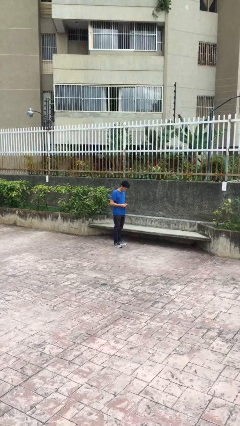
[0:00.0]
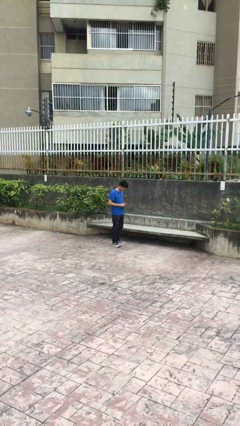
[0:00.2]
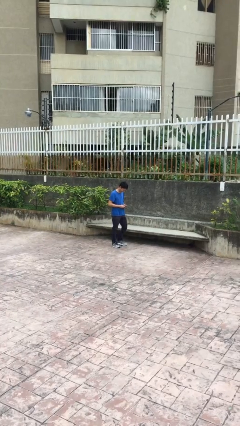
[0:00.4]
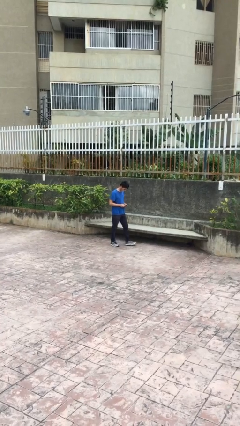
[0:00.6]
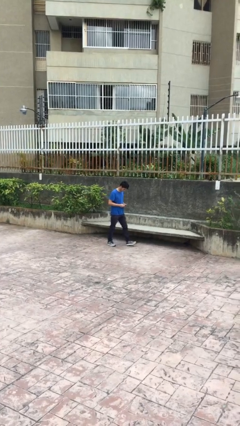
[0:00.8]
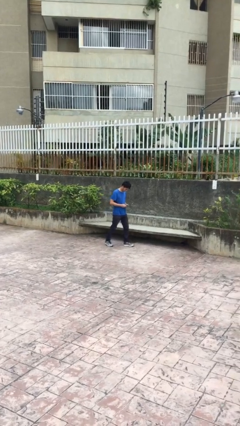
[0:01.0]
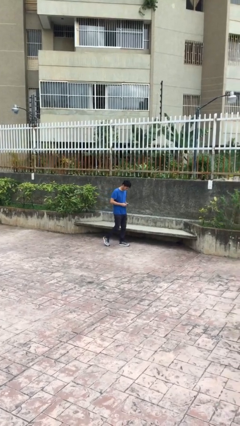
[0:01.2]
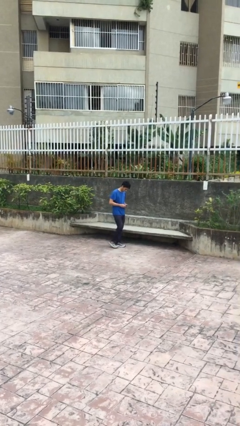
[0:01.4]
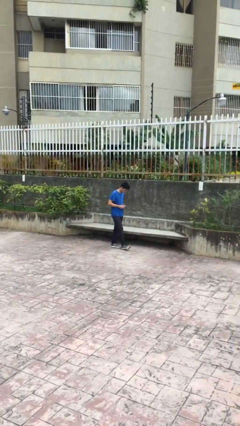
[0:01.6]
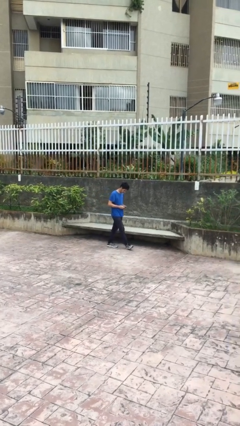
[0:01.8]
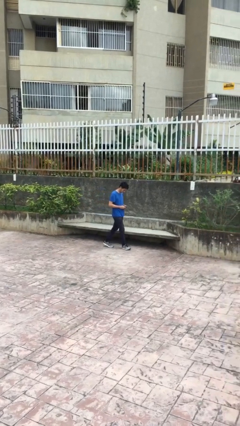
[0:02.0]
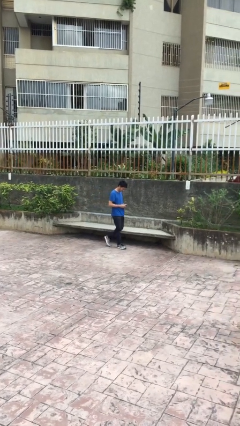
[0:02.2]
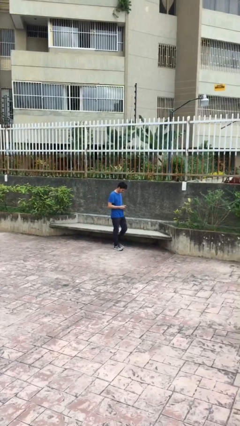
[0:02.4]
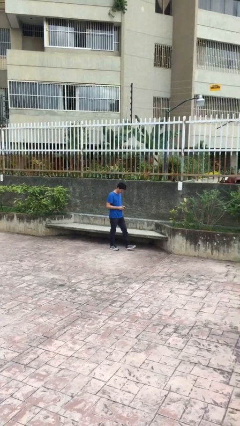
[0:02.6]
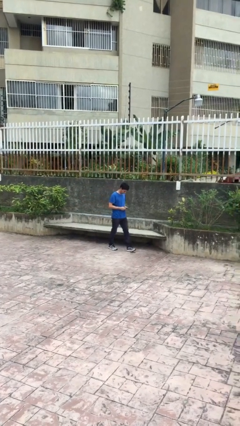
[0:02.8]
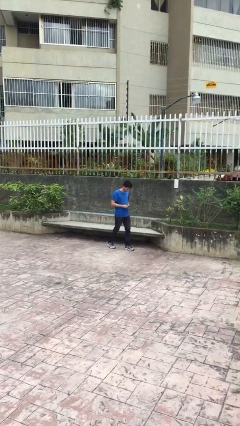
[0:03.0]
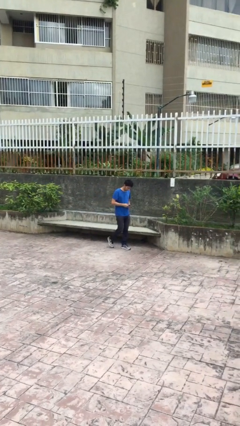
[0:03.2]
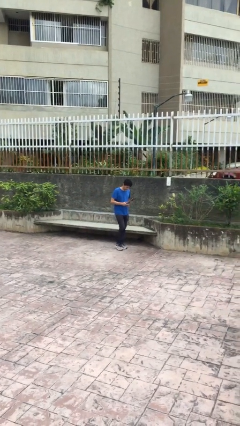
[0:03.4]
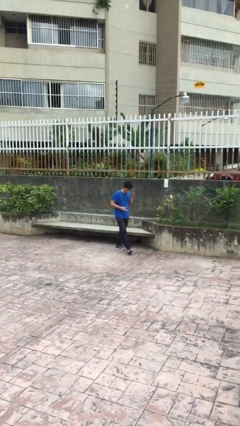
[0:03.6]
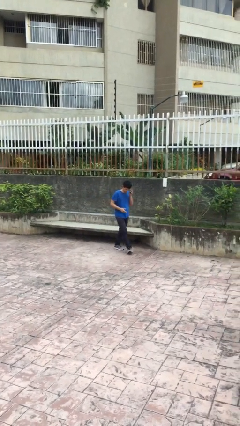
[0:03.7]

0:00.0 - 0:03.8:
person texts on phone

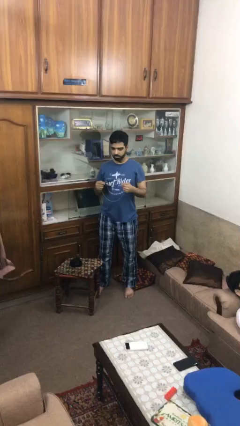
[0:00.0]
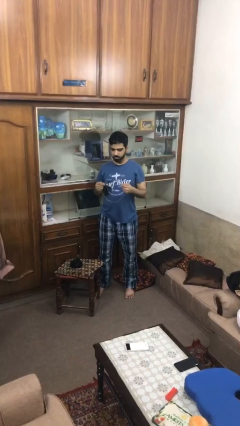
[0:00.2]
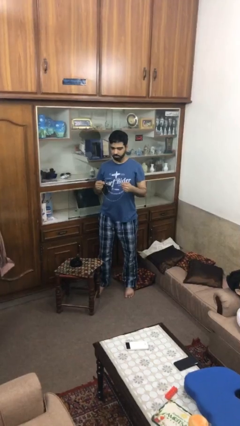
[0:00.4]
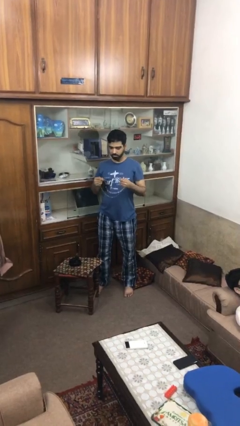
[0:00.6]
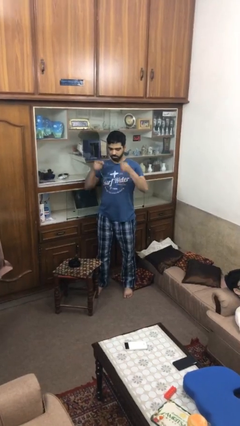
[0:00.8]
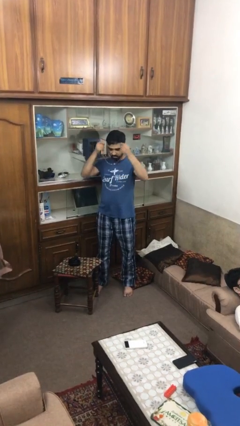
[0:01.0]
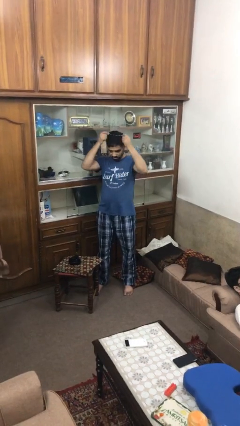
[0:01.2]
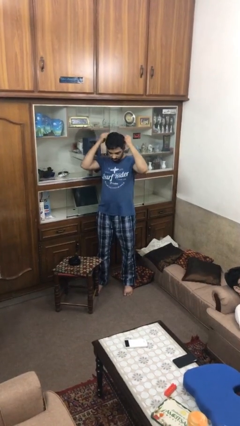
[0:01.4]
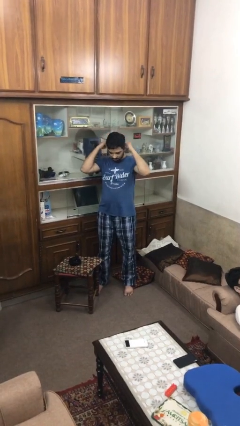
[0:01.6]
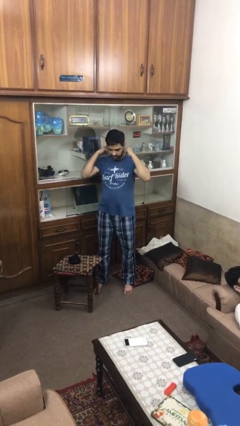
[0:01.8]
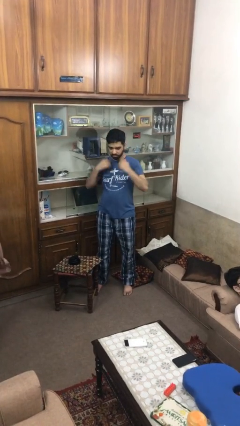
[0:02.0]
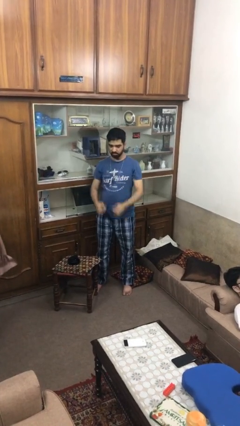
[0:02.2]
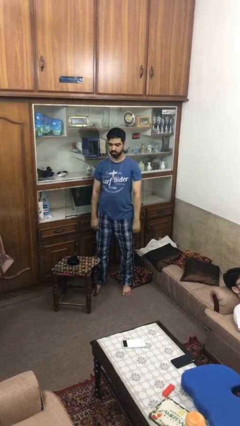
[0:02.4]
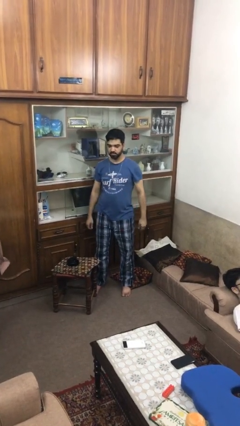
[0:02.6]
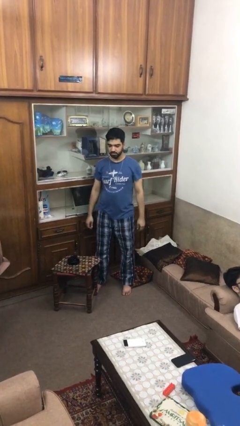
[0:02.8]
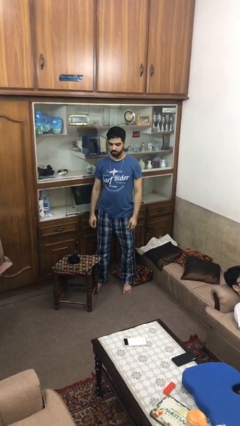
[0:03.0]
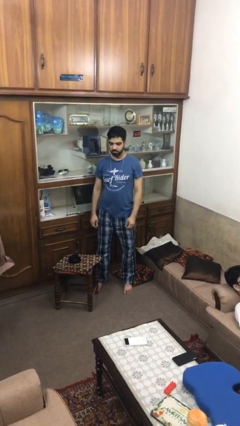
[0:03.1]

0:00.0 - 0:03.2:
person puts on necklace

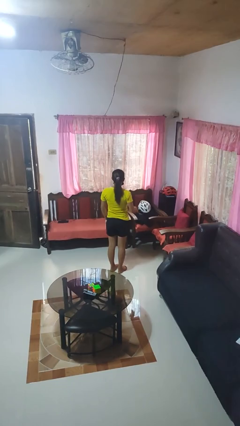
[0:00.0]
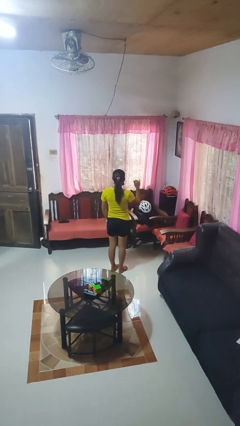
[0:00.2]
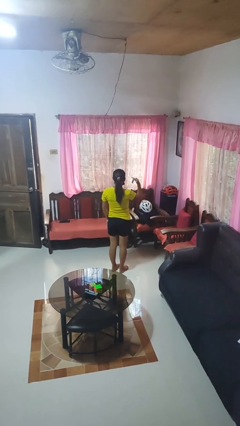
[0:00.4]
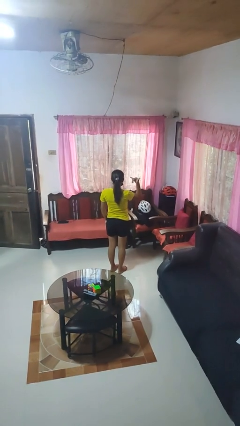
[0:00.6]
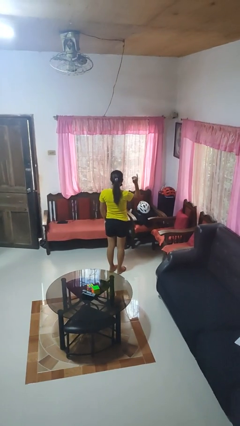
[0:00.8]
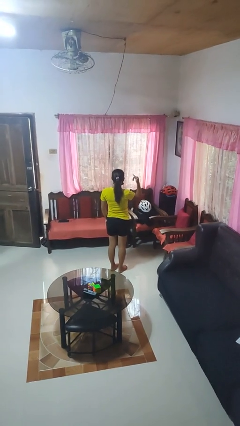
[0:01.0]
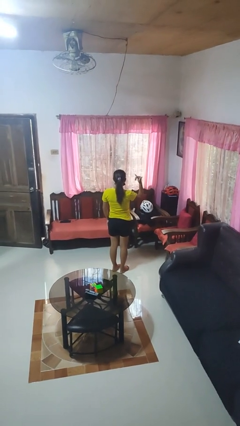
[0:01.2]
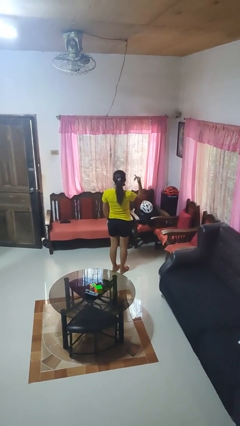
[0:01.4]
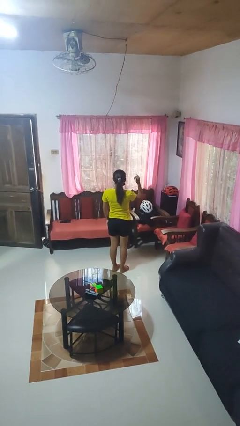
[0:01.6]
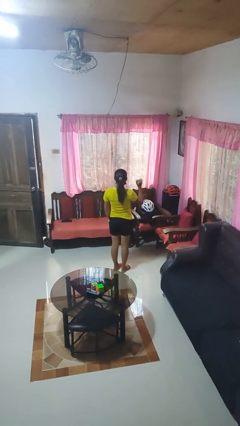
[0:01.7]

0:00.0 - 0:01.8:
person gestures hang loose

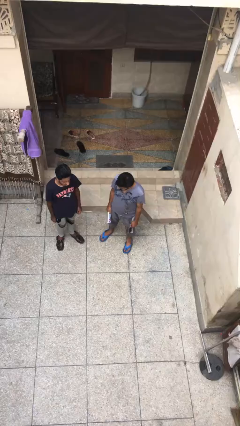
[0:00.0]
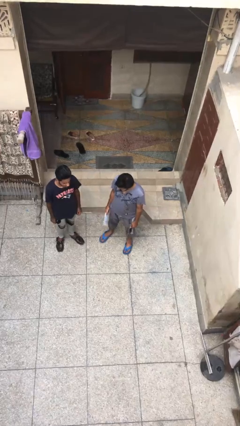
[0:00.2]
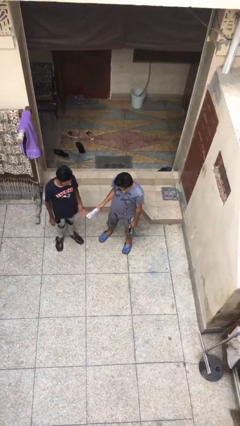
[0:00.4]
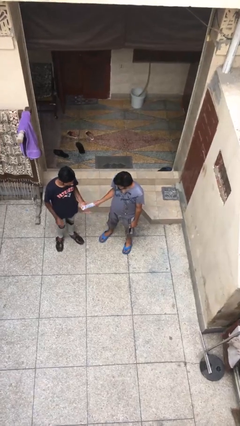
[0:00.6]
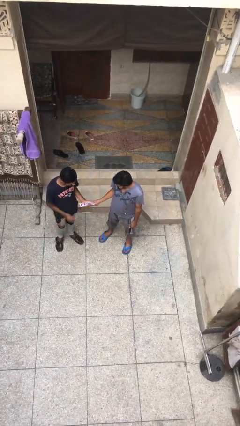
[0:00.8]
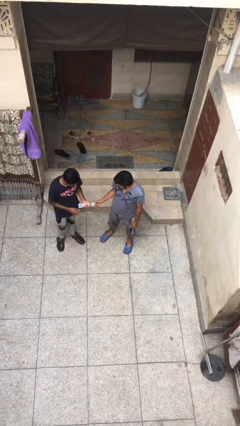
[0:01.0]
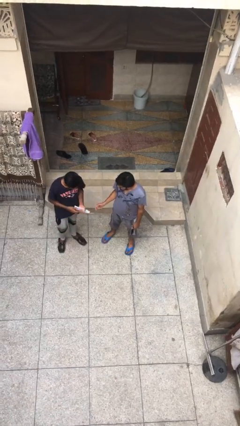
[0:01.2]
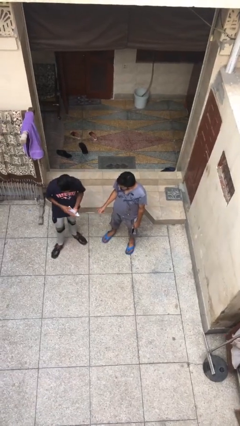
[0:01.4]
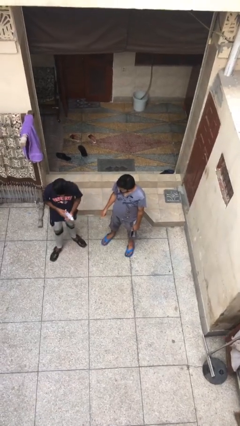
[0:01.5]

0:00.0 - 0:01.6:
person transfers object to person

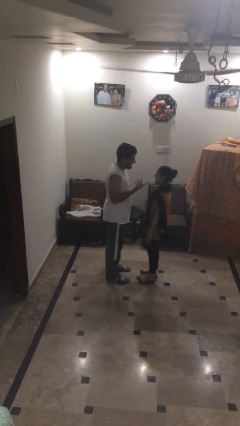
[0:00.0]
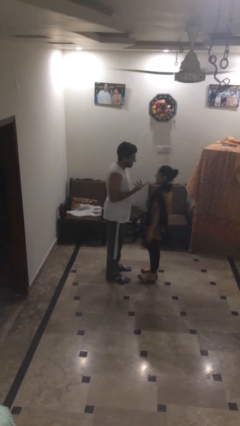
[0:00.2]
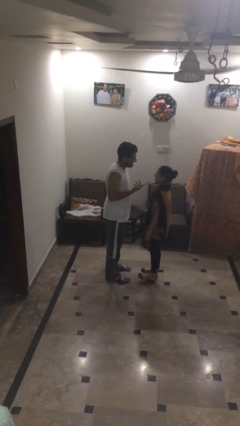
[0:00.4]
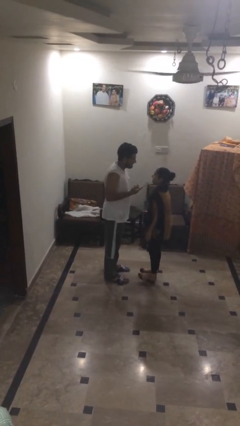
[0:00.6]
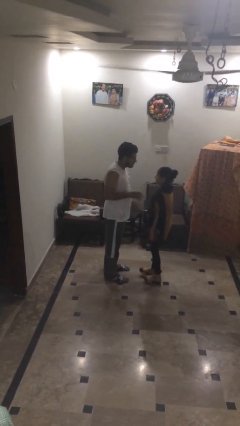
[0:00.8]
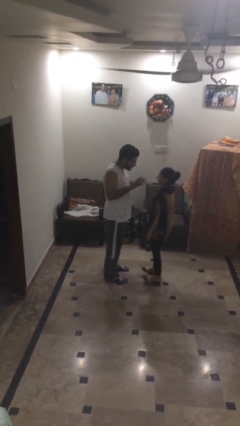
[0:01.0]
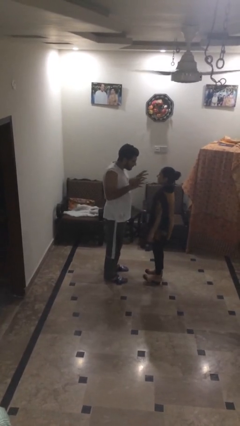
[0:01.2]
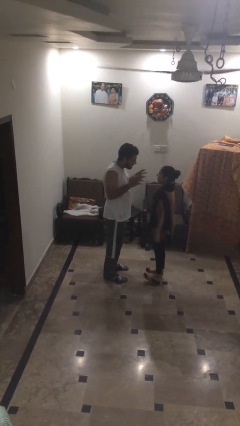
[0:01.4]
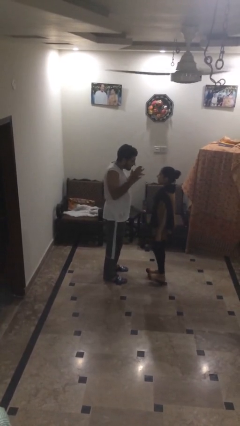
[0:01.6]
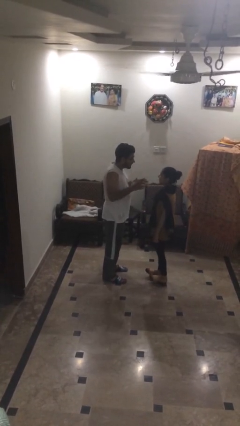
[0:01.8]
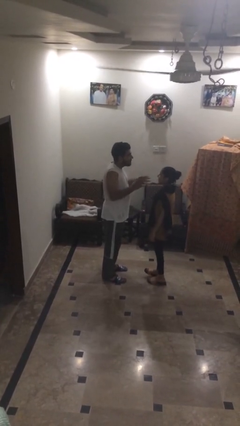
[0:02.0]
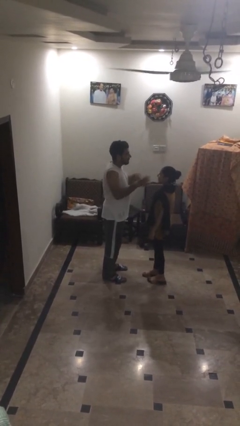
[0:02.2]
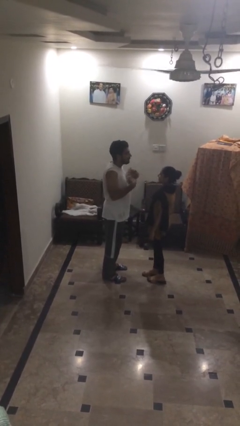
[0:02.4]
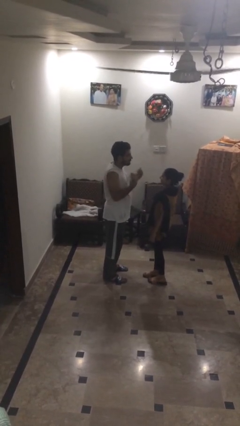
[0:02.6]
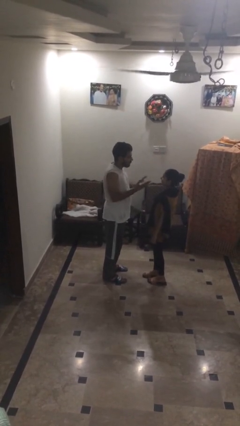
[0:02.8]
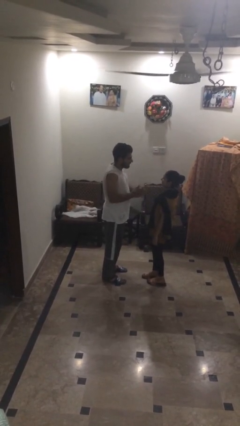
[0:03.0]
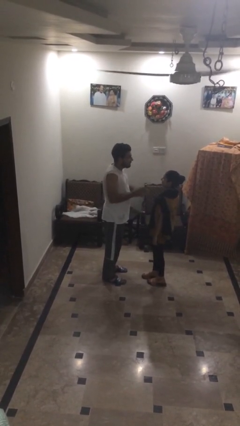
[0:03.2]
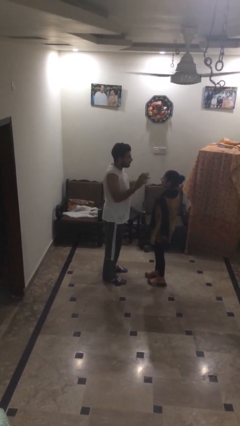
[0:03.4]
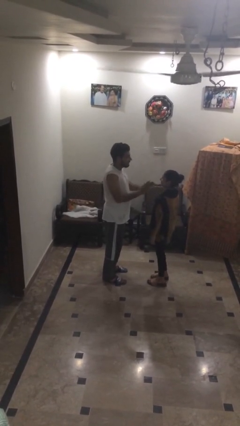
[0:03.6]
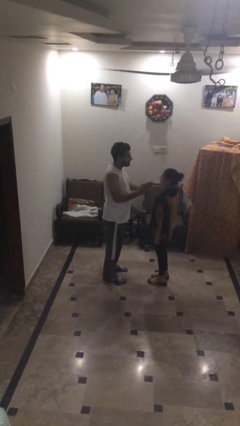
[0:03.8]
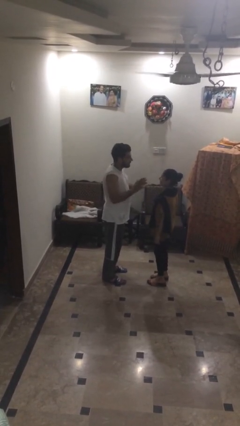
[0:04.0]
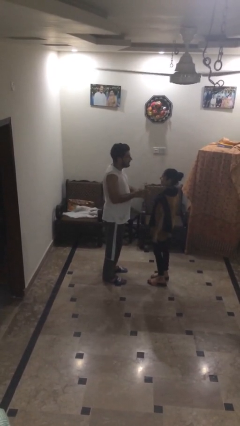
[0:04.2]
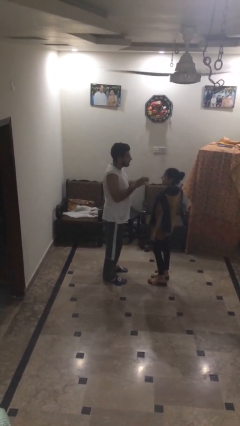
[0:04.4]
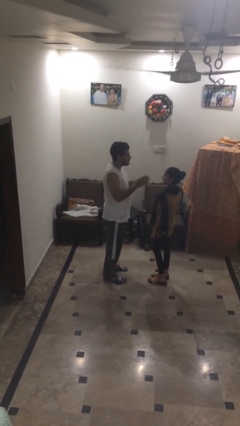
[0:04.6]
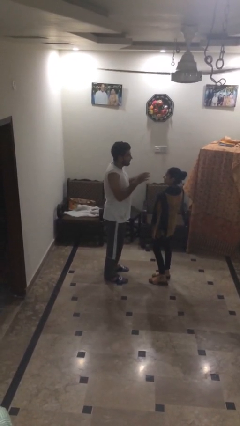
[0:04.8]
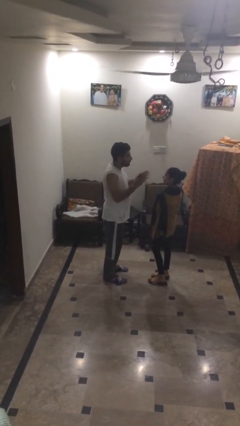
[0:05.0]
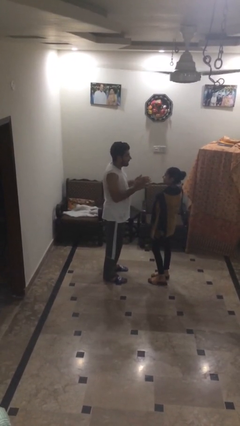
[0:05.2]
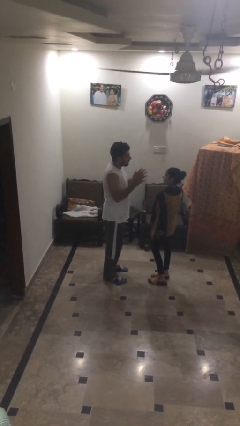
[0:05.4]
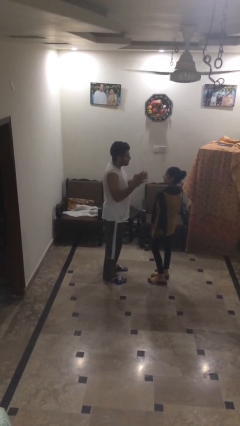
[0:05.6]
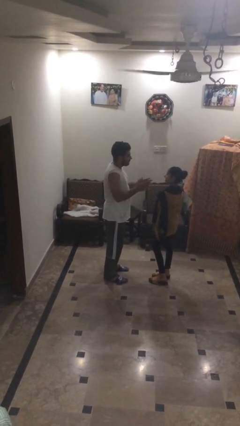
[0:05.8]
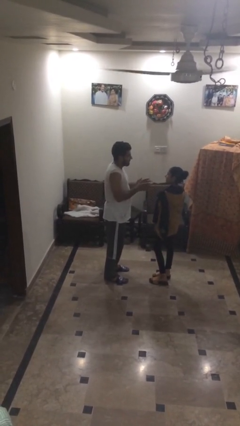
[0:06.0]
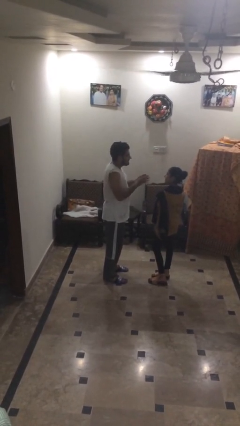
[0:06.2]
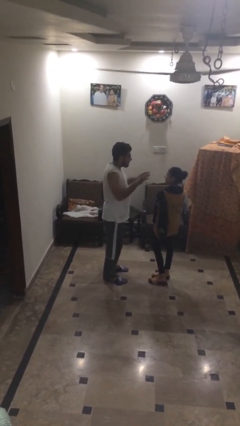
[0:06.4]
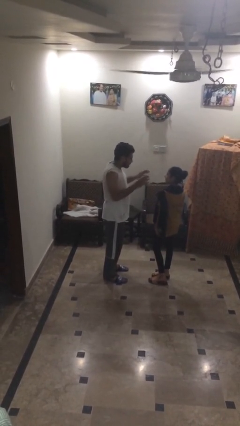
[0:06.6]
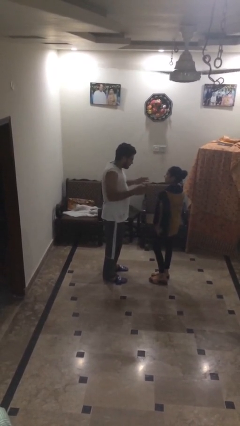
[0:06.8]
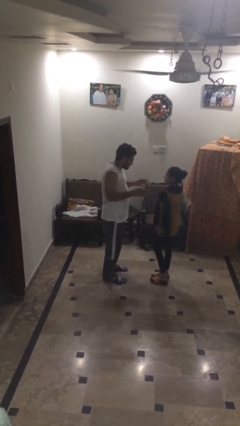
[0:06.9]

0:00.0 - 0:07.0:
person talks to person
